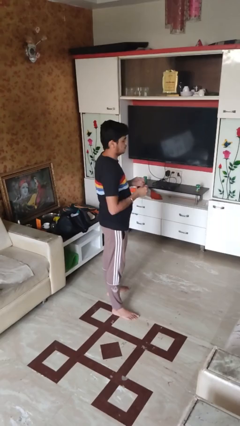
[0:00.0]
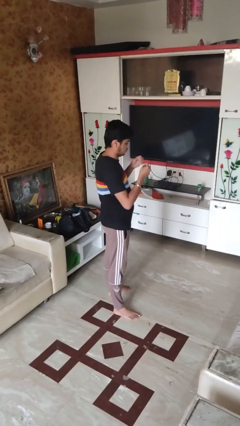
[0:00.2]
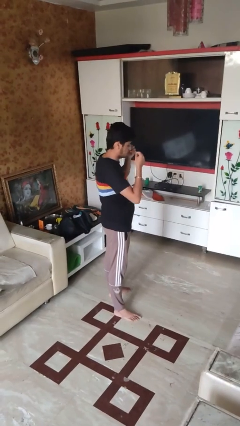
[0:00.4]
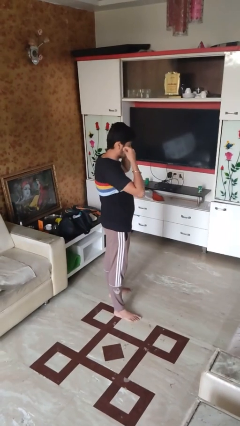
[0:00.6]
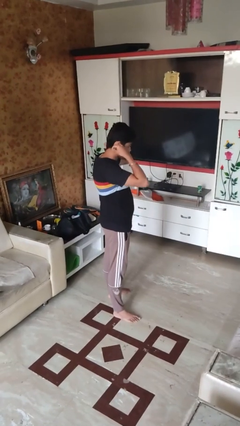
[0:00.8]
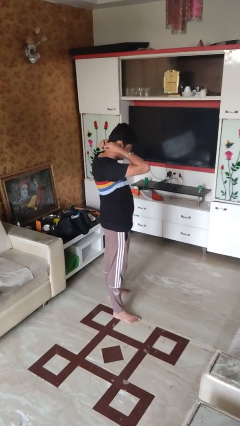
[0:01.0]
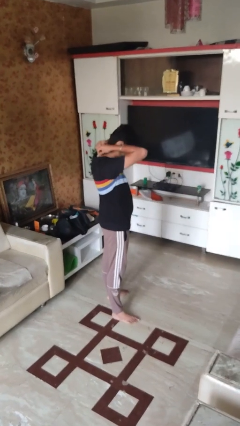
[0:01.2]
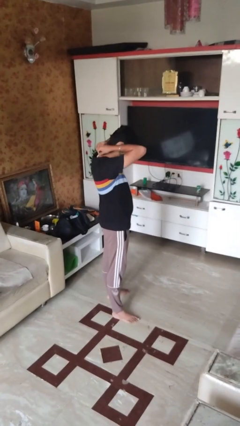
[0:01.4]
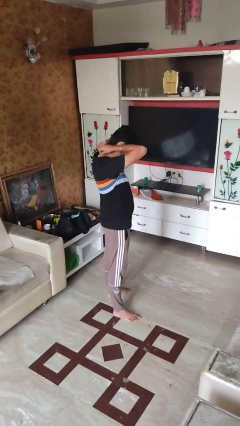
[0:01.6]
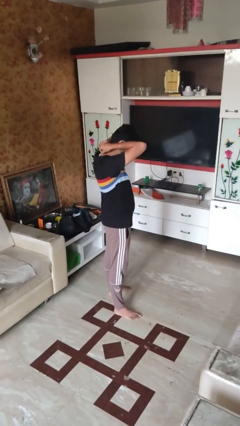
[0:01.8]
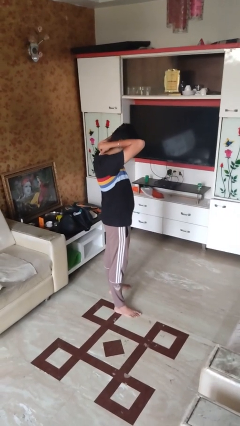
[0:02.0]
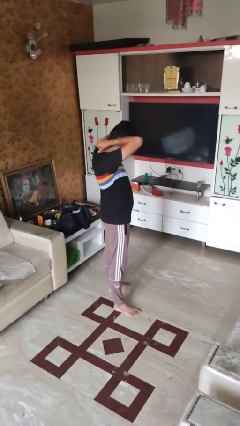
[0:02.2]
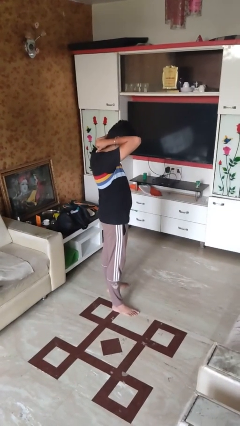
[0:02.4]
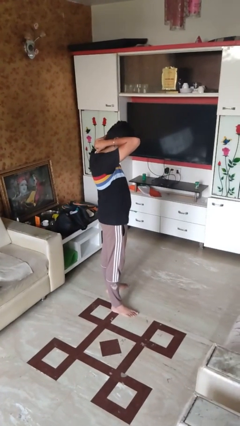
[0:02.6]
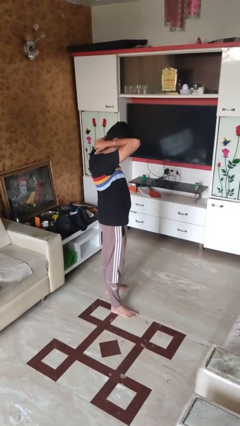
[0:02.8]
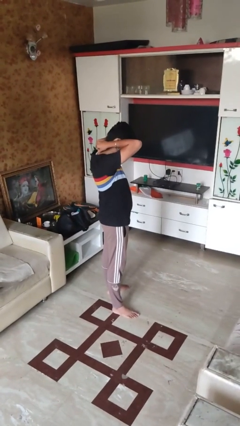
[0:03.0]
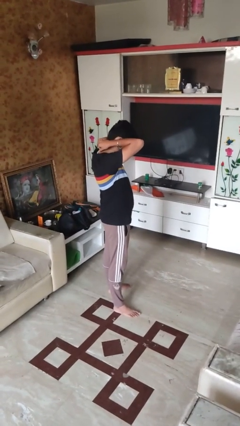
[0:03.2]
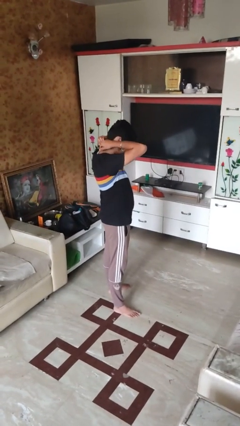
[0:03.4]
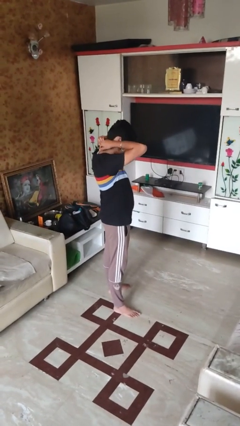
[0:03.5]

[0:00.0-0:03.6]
person puts on necklace

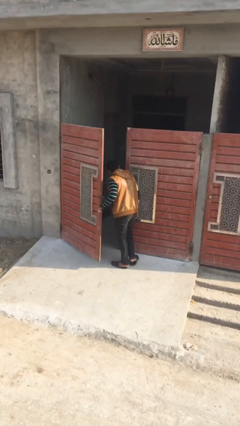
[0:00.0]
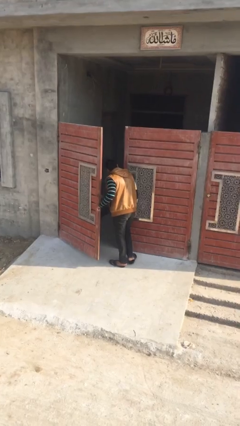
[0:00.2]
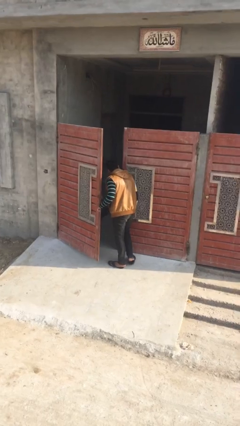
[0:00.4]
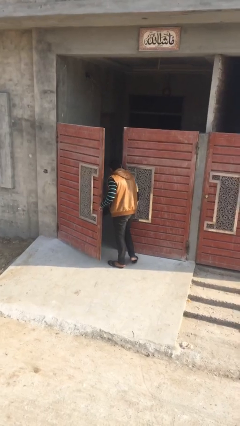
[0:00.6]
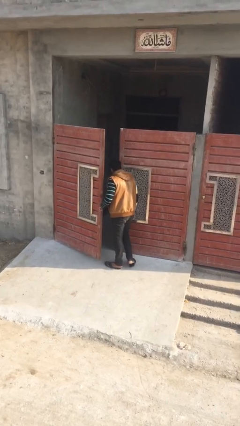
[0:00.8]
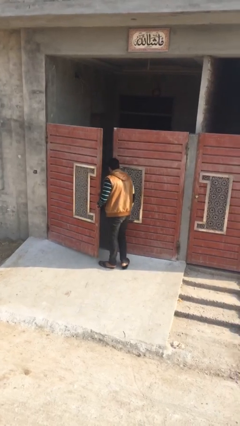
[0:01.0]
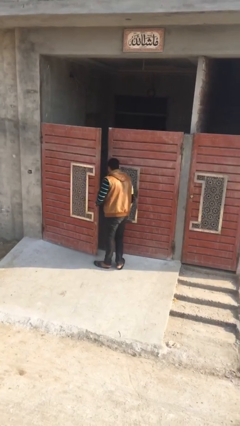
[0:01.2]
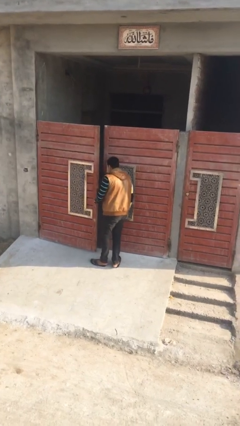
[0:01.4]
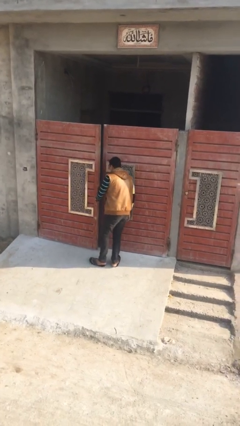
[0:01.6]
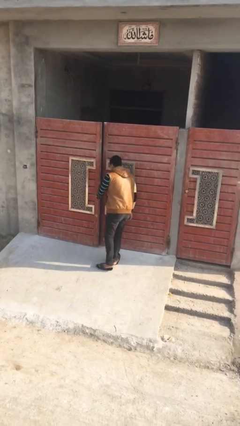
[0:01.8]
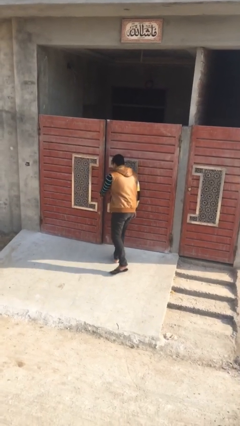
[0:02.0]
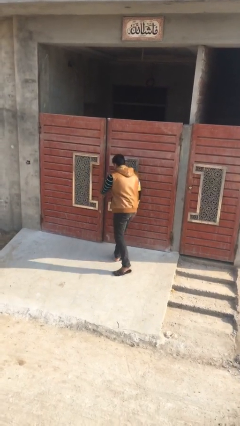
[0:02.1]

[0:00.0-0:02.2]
person closes facility door

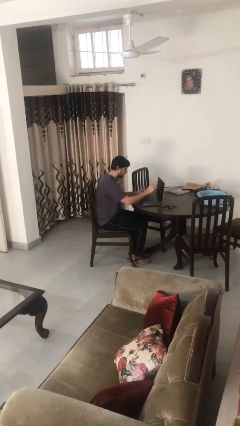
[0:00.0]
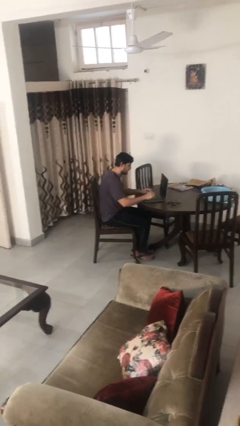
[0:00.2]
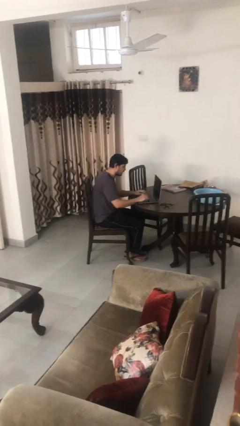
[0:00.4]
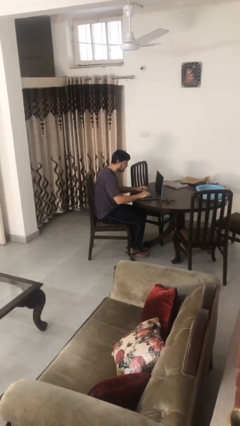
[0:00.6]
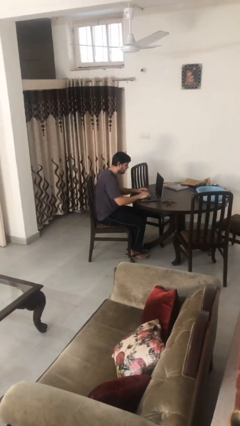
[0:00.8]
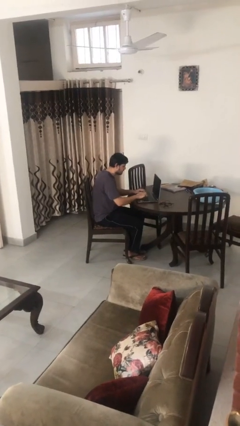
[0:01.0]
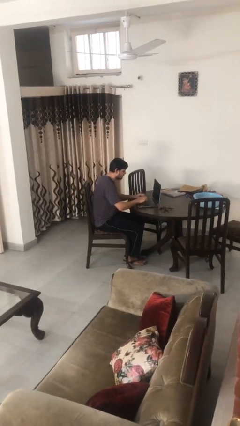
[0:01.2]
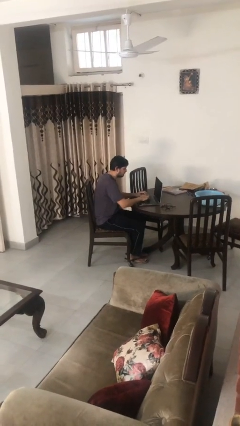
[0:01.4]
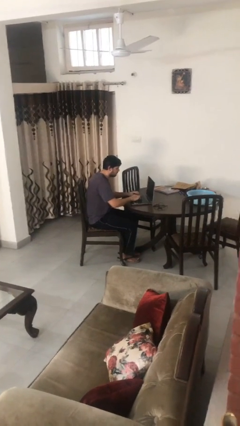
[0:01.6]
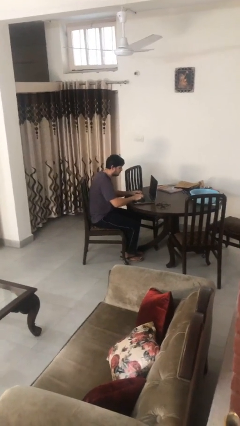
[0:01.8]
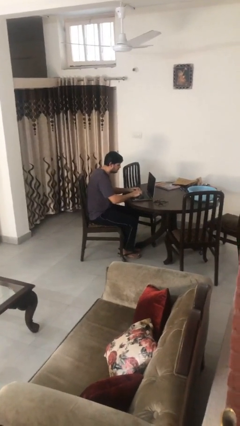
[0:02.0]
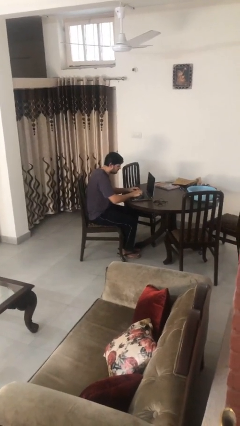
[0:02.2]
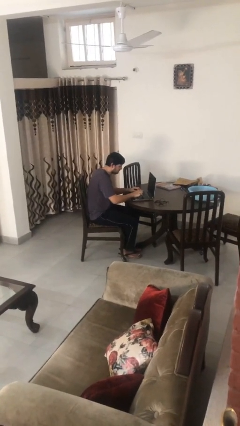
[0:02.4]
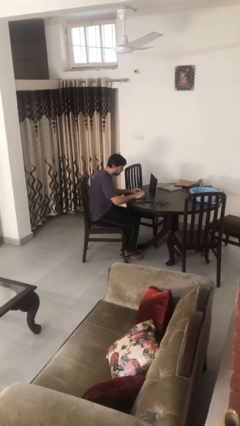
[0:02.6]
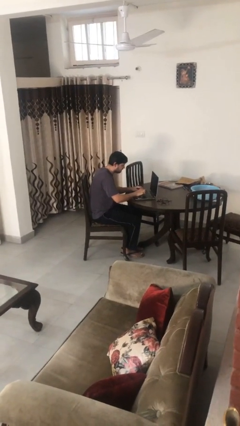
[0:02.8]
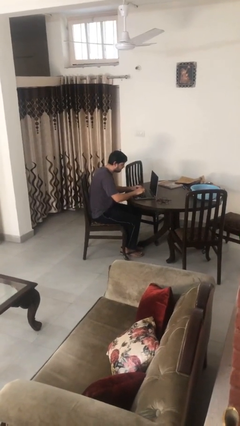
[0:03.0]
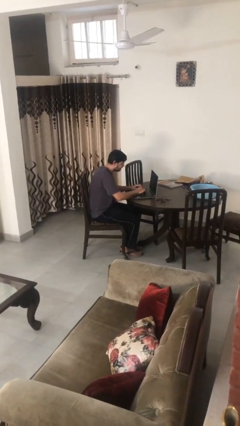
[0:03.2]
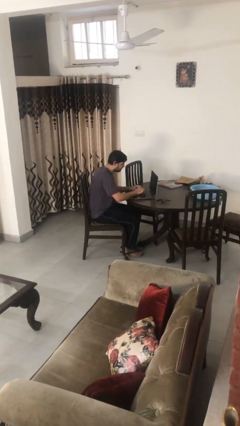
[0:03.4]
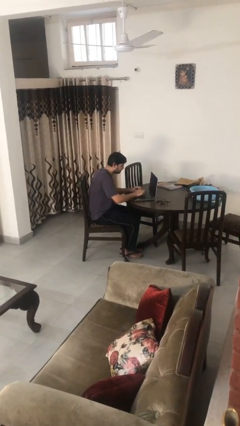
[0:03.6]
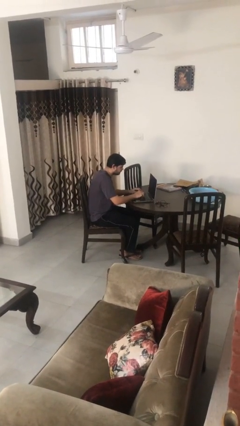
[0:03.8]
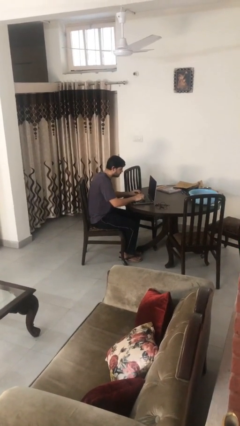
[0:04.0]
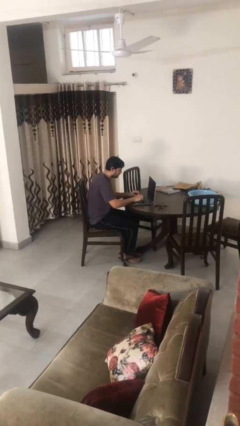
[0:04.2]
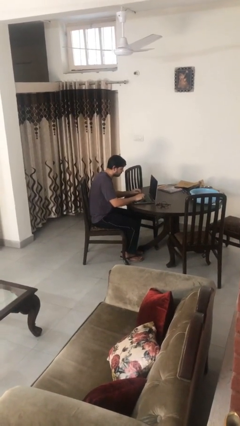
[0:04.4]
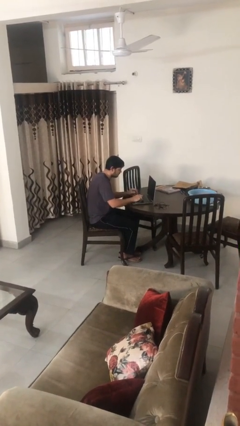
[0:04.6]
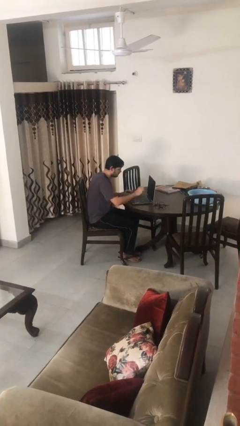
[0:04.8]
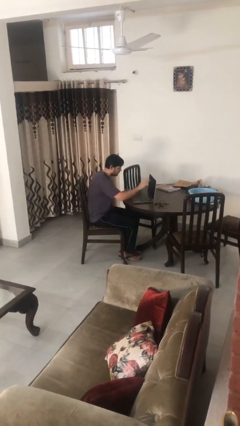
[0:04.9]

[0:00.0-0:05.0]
person interacts with laptop

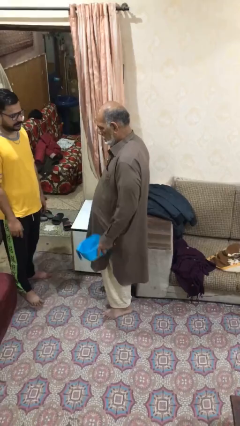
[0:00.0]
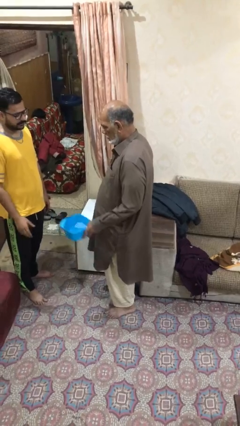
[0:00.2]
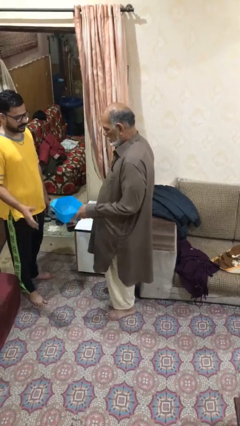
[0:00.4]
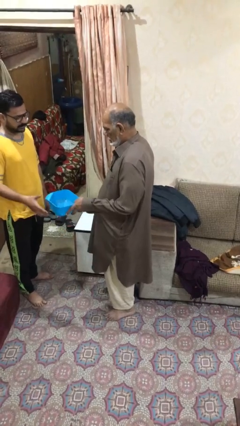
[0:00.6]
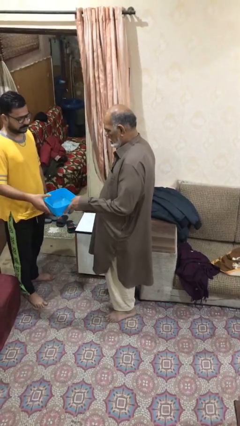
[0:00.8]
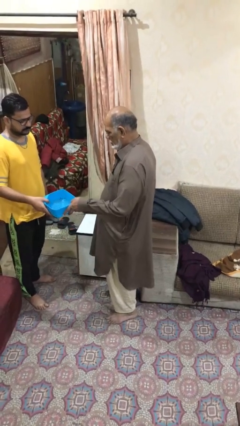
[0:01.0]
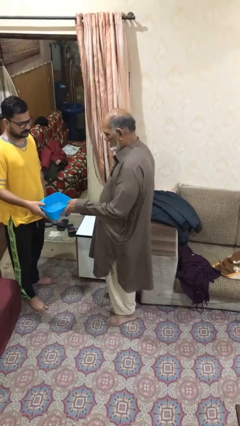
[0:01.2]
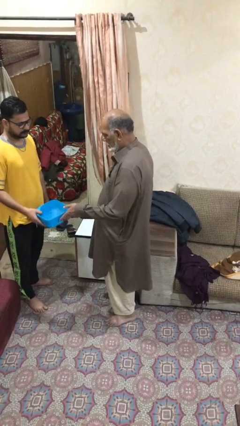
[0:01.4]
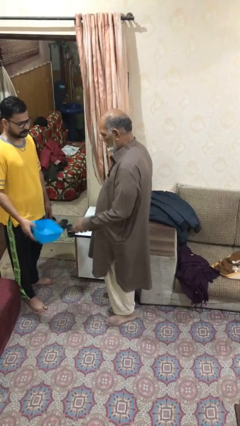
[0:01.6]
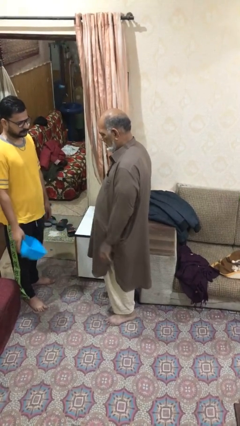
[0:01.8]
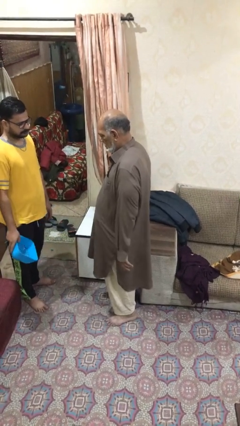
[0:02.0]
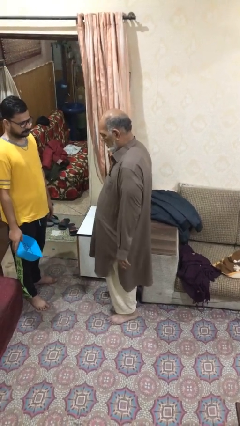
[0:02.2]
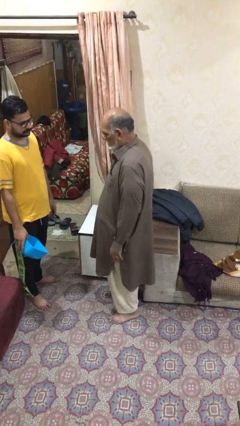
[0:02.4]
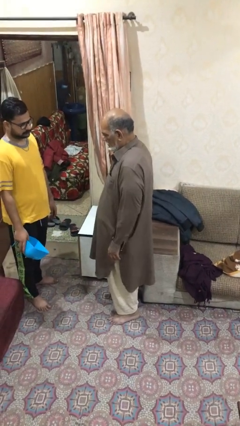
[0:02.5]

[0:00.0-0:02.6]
person transfers object to person

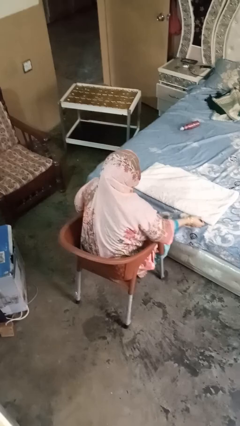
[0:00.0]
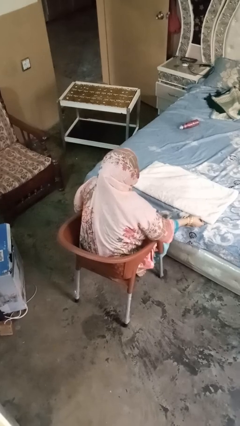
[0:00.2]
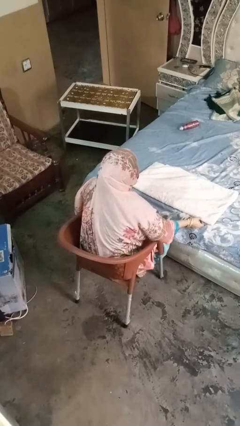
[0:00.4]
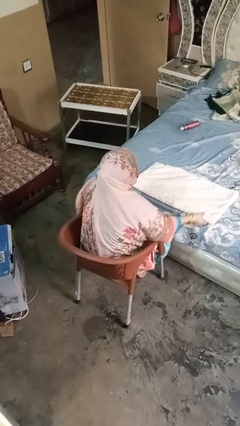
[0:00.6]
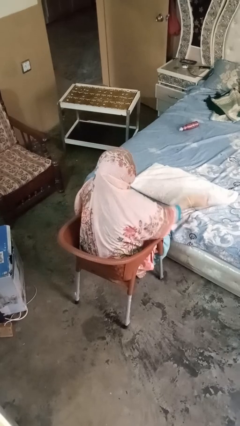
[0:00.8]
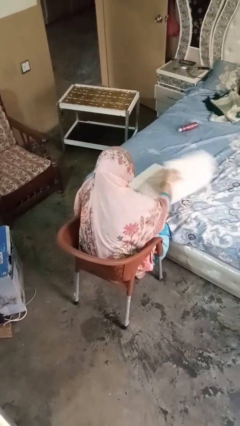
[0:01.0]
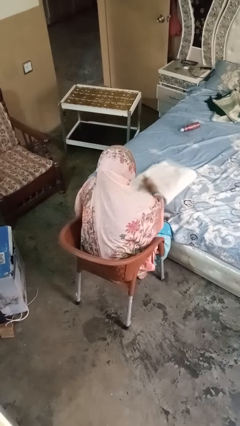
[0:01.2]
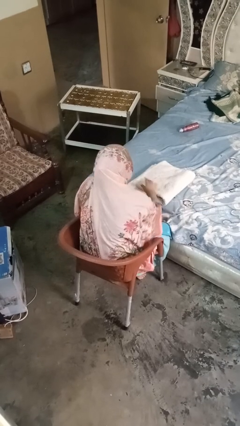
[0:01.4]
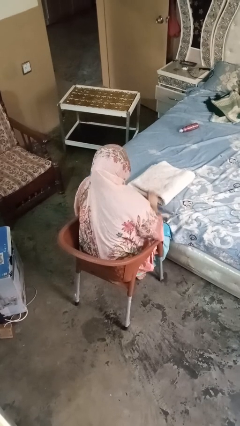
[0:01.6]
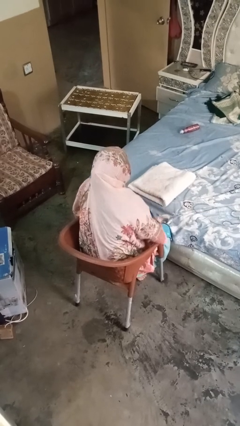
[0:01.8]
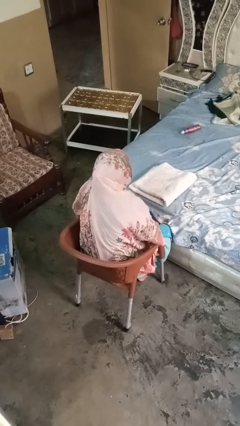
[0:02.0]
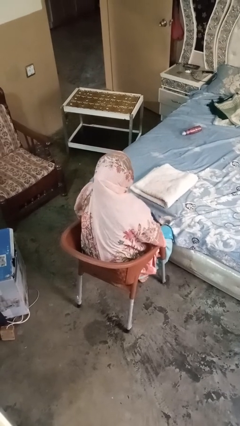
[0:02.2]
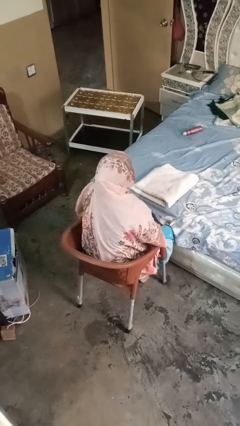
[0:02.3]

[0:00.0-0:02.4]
person folds towel

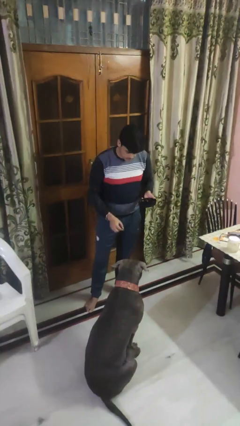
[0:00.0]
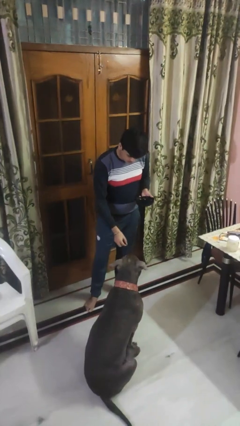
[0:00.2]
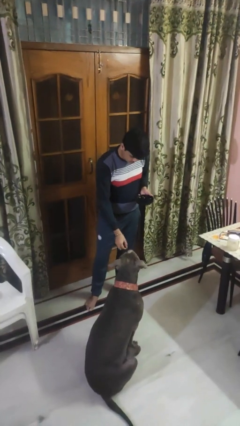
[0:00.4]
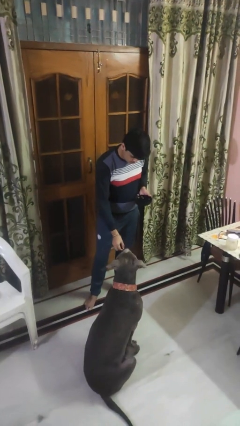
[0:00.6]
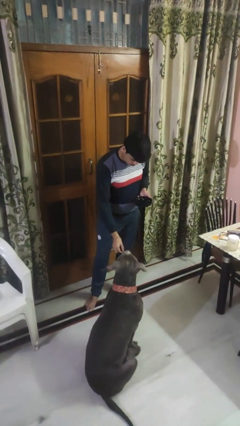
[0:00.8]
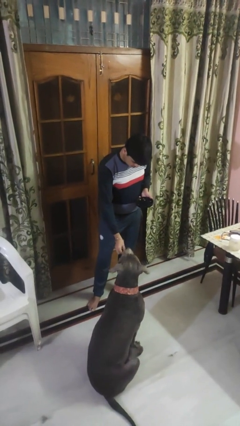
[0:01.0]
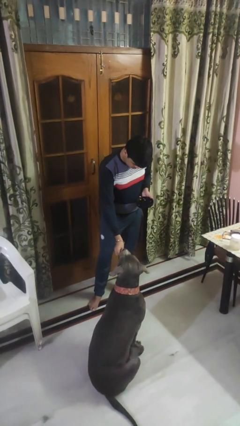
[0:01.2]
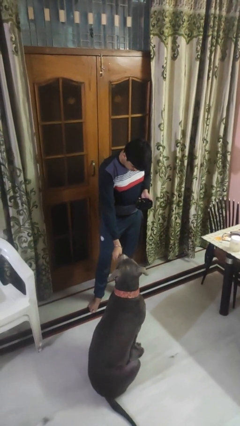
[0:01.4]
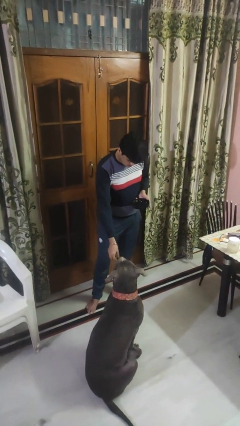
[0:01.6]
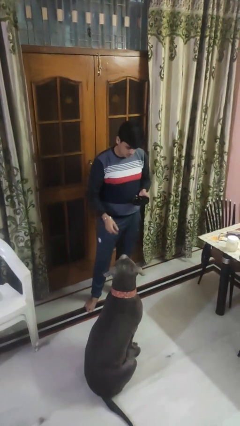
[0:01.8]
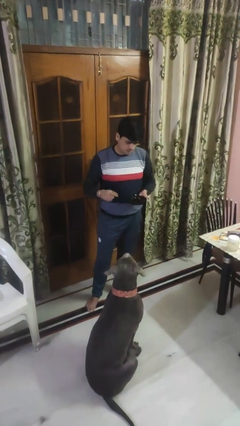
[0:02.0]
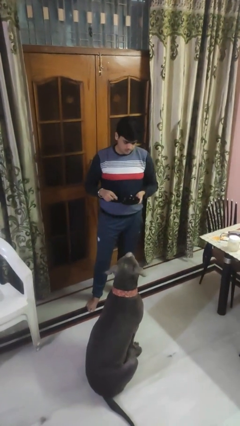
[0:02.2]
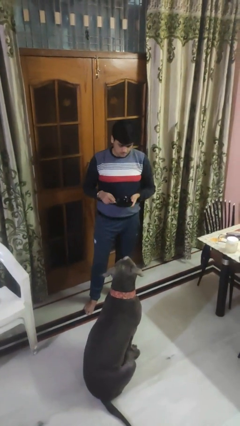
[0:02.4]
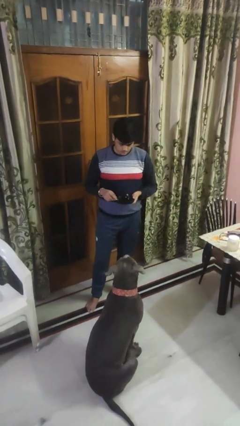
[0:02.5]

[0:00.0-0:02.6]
person feeds dog
